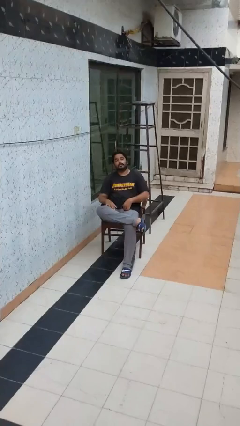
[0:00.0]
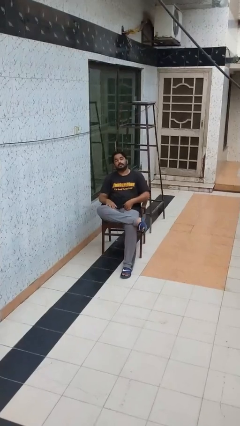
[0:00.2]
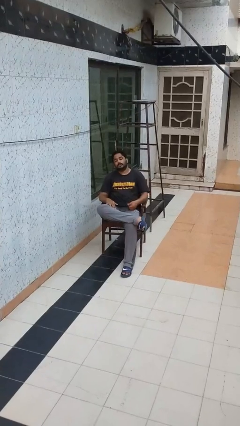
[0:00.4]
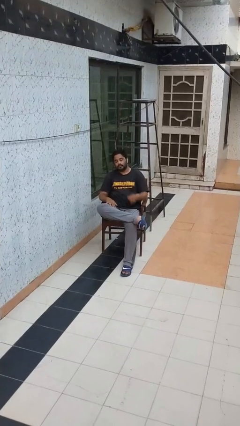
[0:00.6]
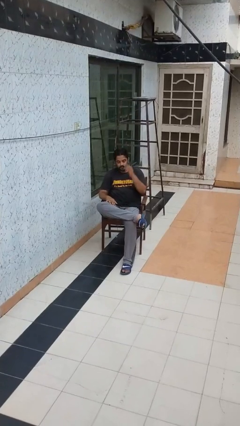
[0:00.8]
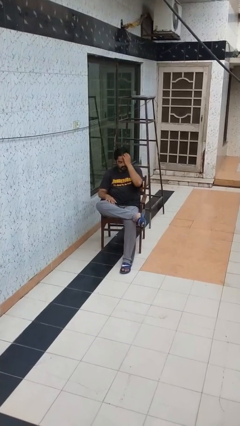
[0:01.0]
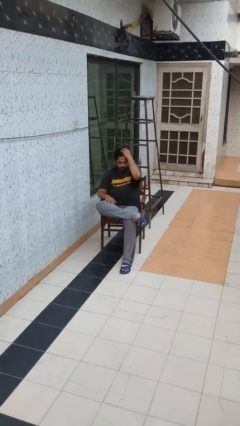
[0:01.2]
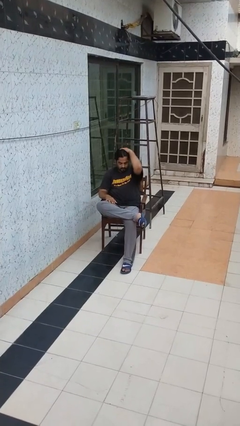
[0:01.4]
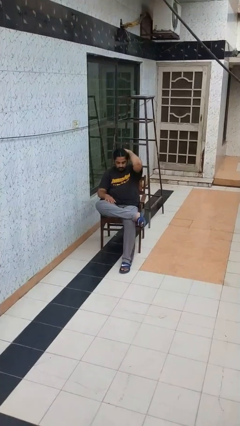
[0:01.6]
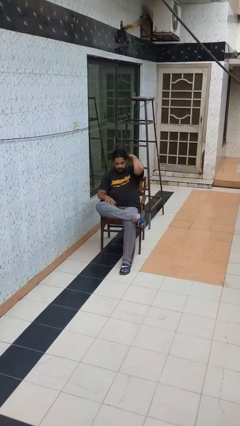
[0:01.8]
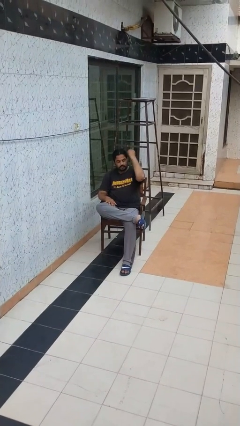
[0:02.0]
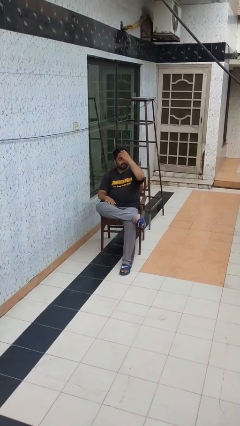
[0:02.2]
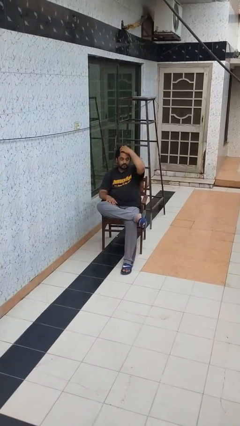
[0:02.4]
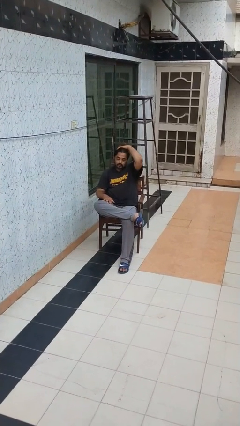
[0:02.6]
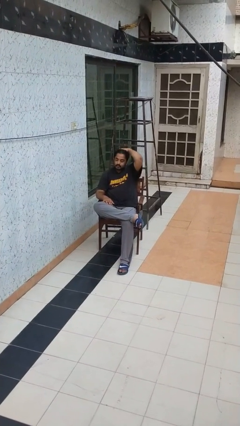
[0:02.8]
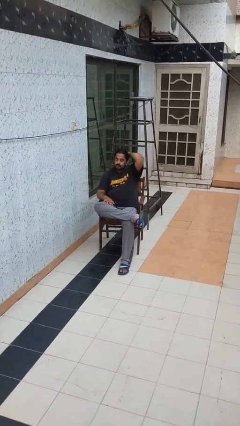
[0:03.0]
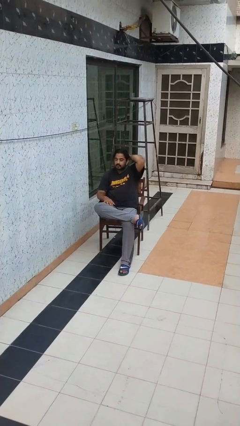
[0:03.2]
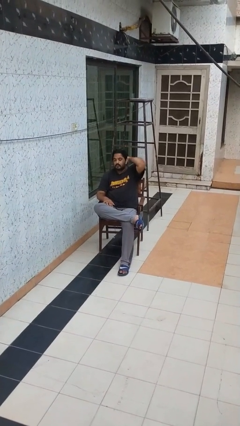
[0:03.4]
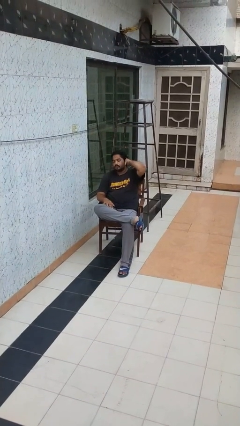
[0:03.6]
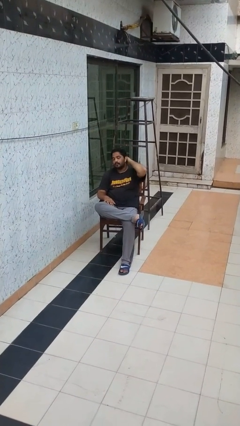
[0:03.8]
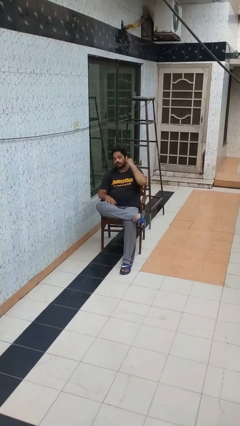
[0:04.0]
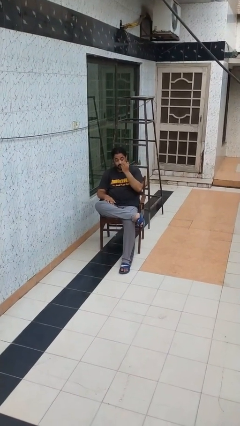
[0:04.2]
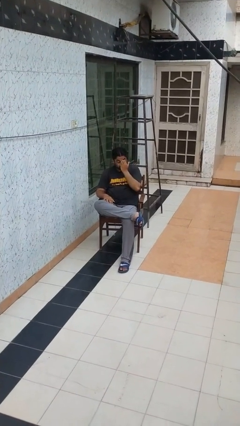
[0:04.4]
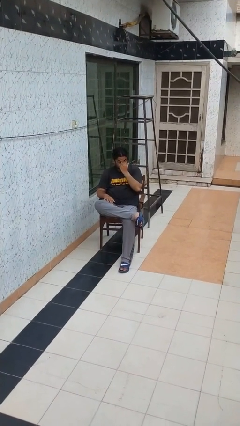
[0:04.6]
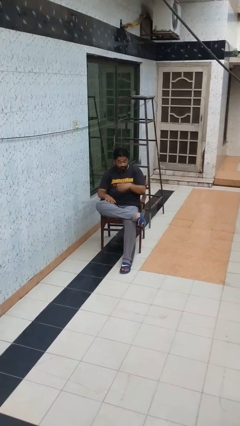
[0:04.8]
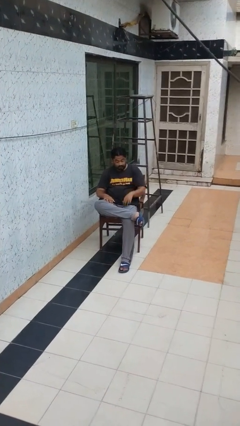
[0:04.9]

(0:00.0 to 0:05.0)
person strokes hair

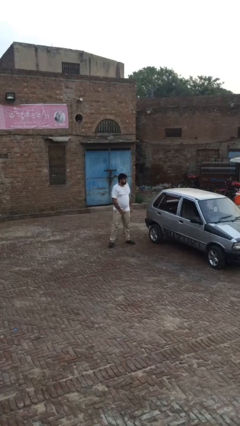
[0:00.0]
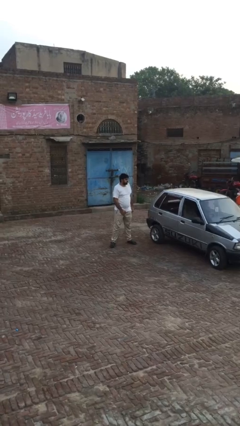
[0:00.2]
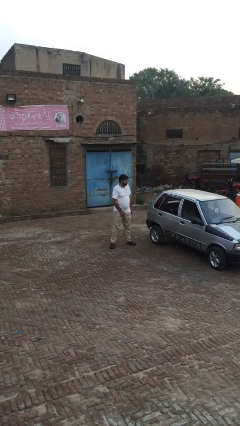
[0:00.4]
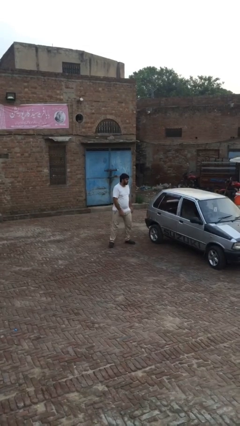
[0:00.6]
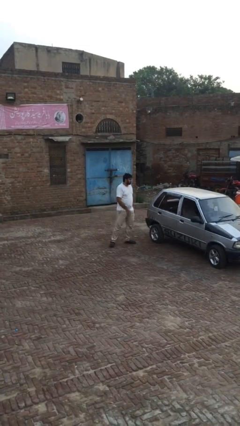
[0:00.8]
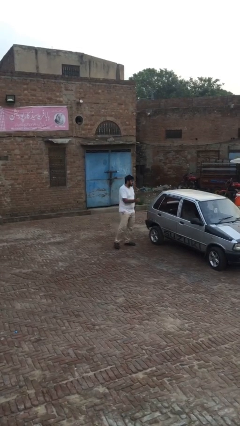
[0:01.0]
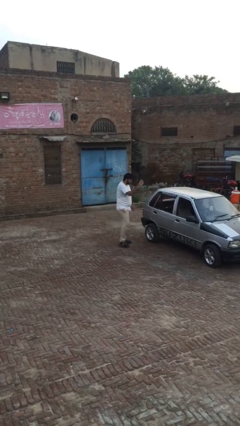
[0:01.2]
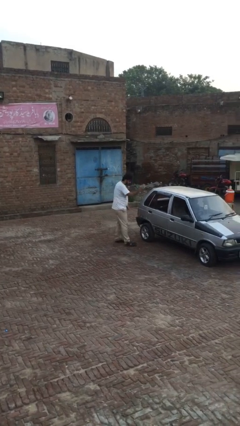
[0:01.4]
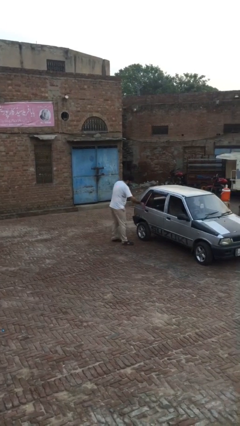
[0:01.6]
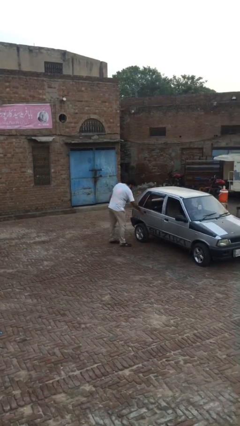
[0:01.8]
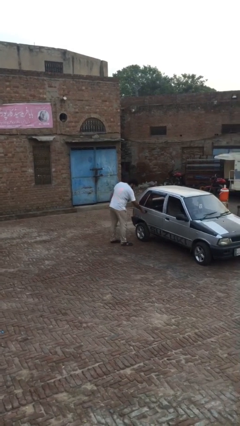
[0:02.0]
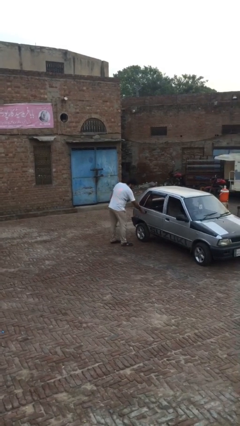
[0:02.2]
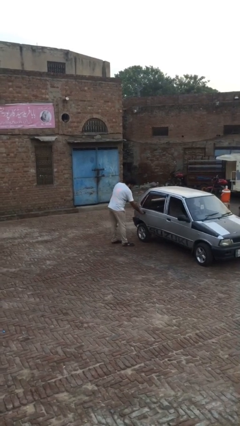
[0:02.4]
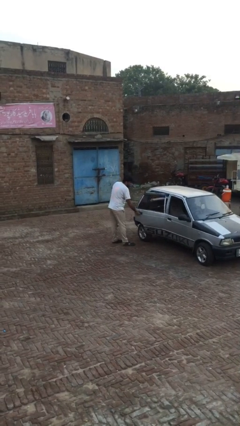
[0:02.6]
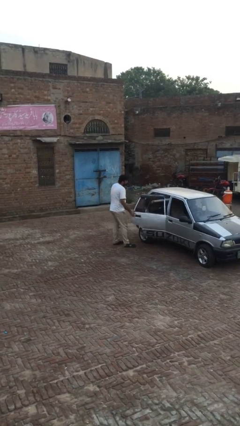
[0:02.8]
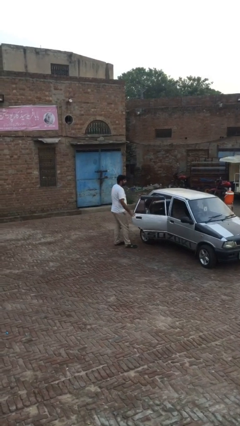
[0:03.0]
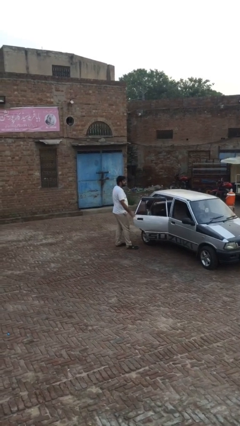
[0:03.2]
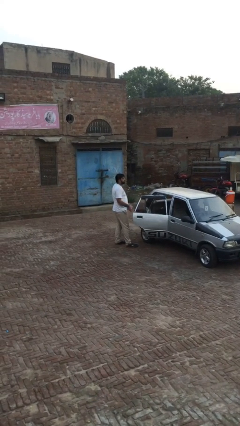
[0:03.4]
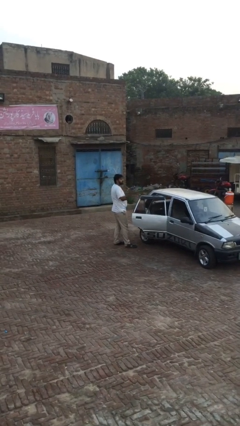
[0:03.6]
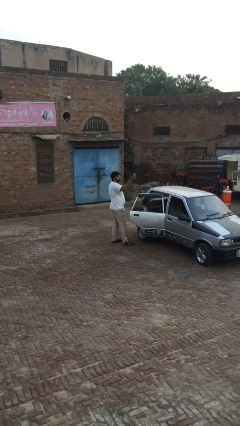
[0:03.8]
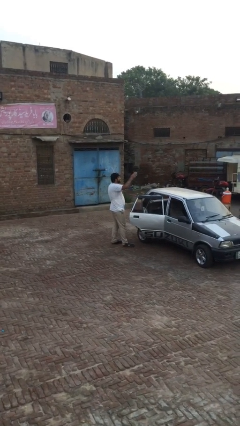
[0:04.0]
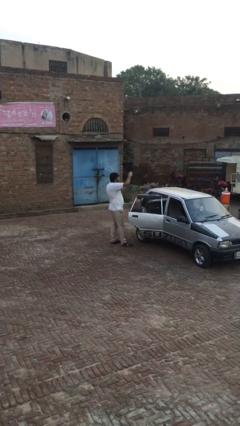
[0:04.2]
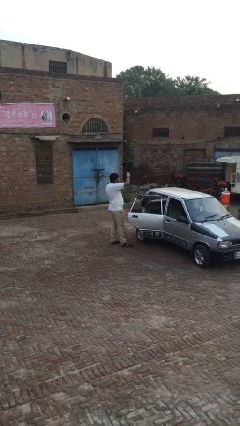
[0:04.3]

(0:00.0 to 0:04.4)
person opens car door

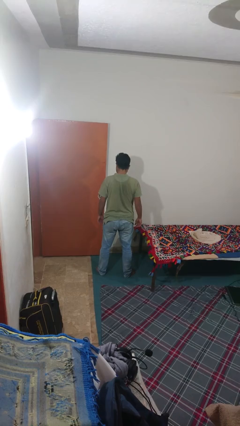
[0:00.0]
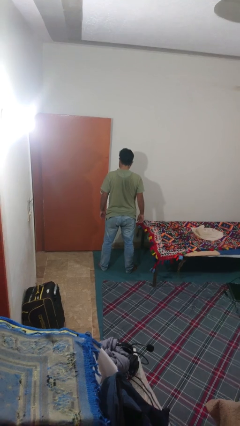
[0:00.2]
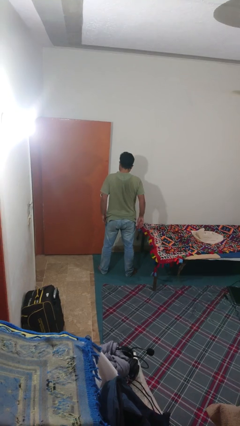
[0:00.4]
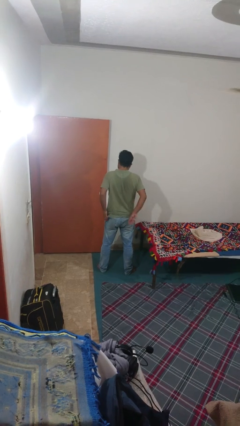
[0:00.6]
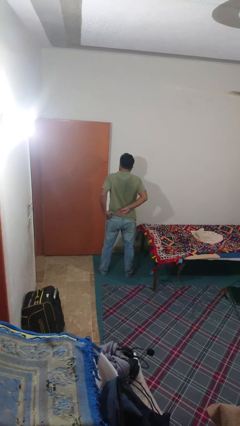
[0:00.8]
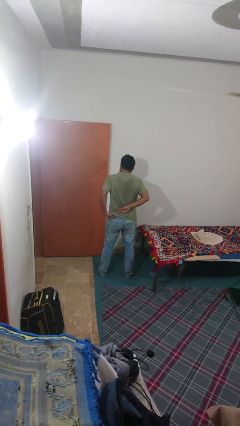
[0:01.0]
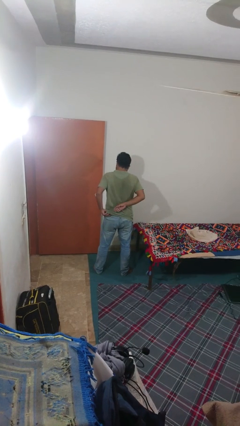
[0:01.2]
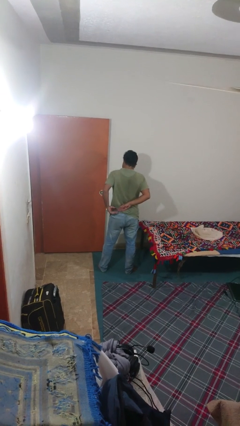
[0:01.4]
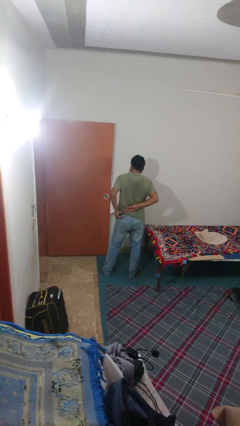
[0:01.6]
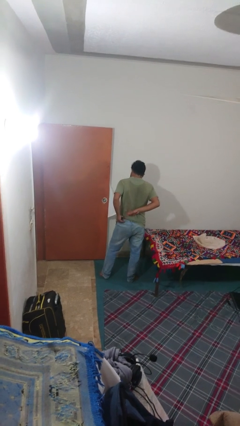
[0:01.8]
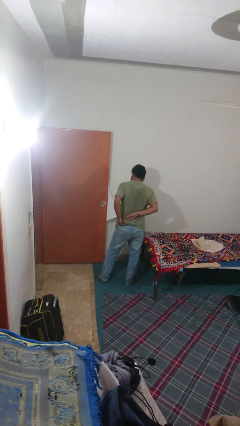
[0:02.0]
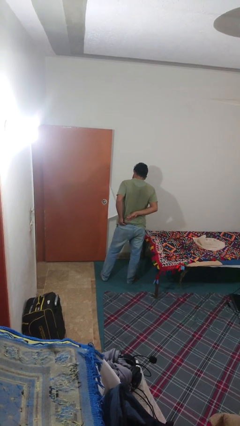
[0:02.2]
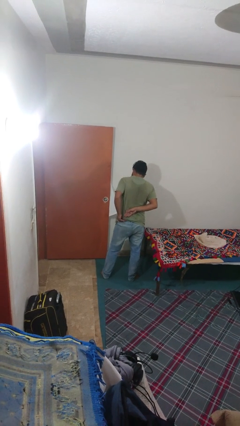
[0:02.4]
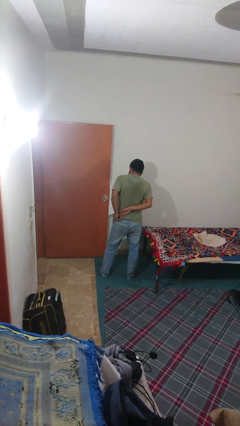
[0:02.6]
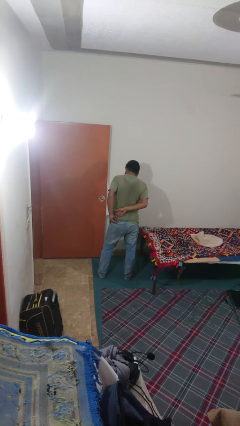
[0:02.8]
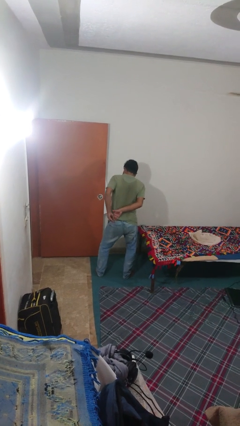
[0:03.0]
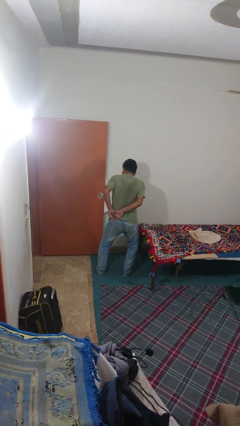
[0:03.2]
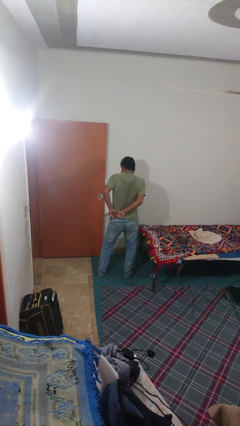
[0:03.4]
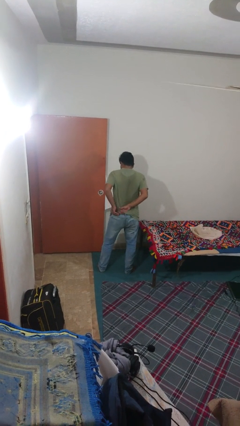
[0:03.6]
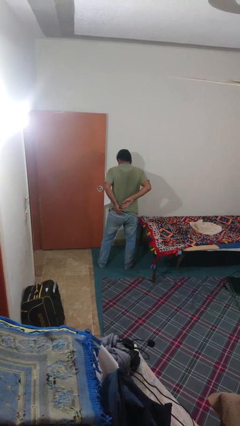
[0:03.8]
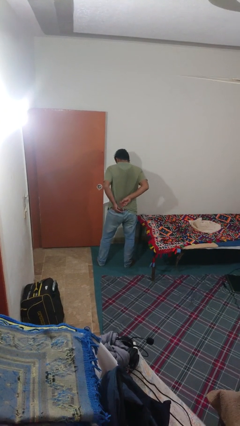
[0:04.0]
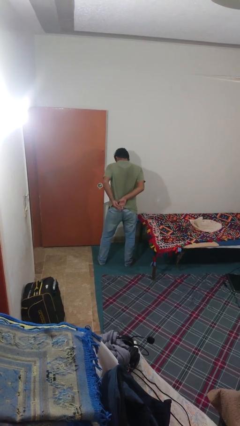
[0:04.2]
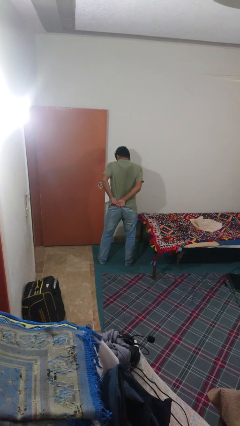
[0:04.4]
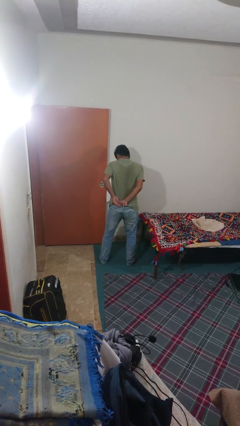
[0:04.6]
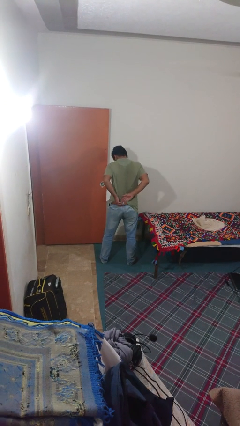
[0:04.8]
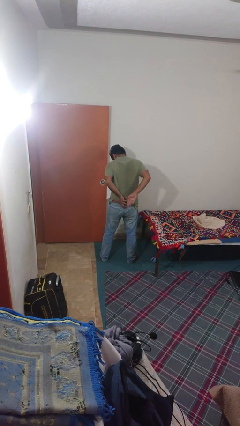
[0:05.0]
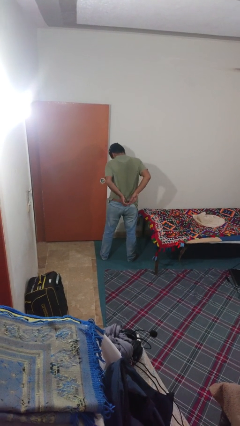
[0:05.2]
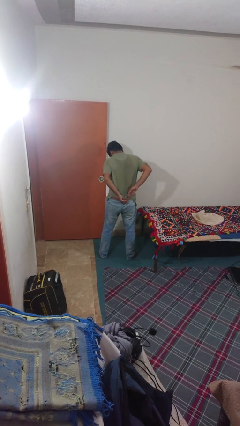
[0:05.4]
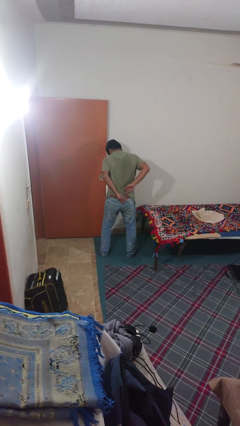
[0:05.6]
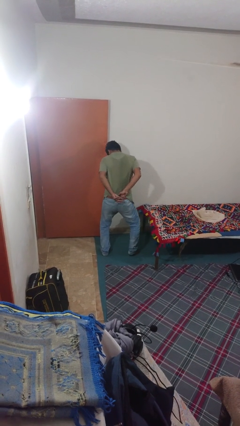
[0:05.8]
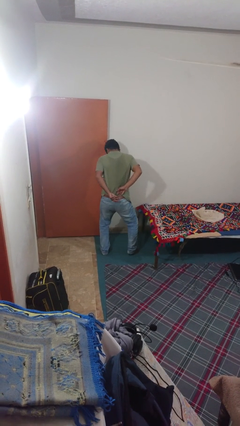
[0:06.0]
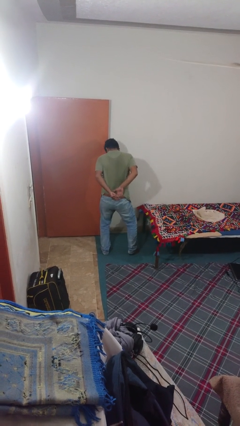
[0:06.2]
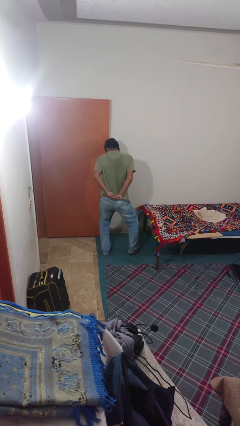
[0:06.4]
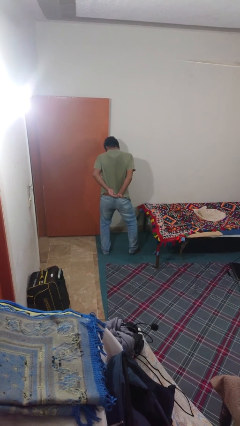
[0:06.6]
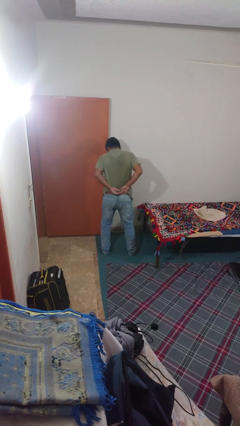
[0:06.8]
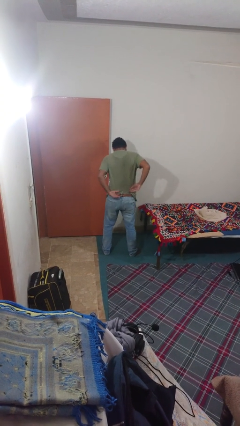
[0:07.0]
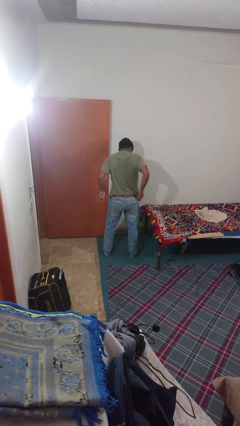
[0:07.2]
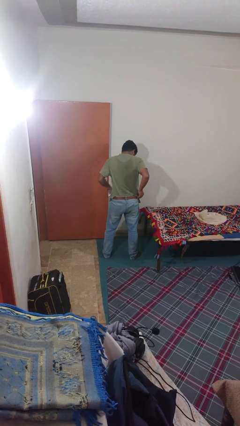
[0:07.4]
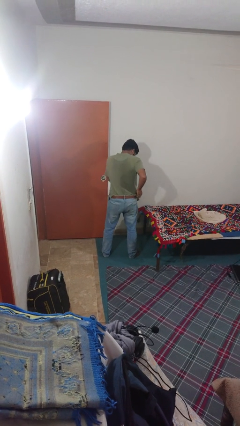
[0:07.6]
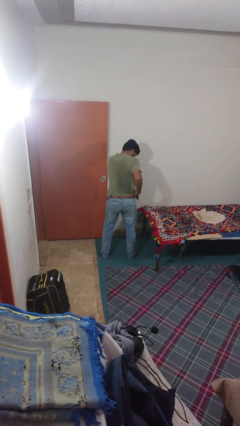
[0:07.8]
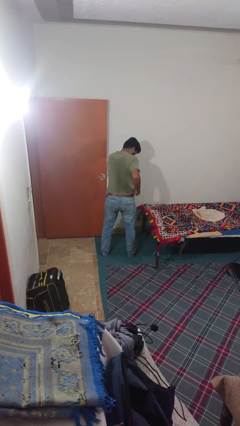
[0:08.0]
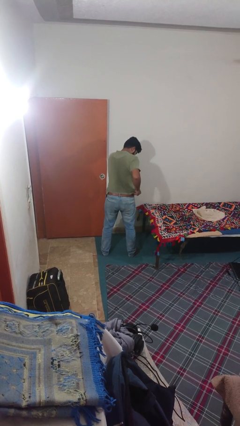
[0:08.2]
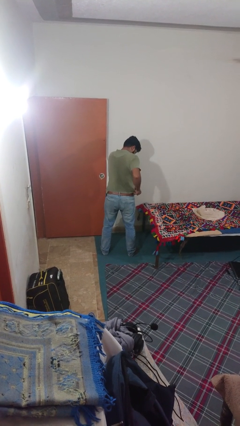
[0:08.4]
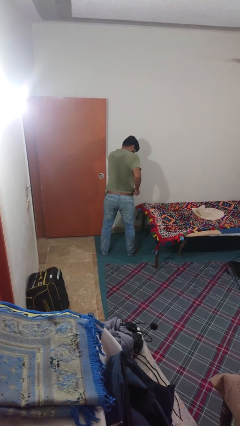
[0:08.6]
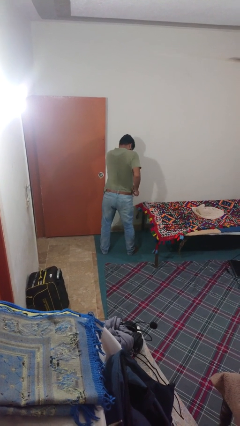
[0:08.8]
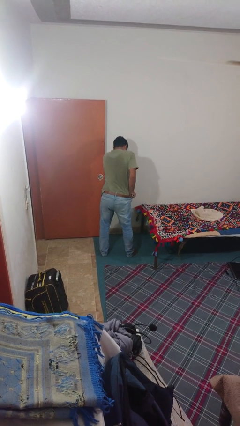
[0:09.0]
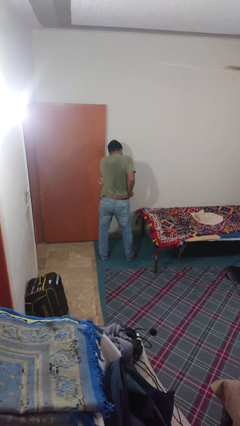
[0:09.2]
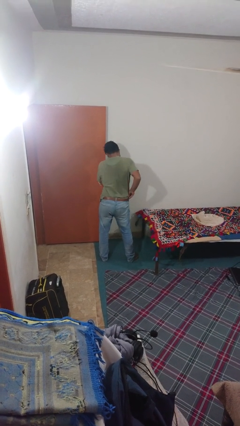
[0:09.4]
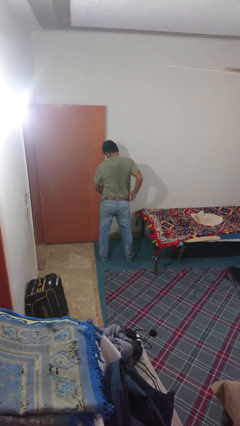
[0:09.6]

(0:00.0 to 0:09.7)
person tucks in shirt
